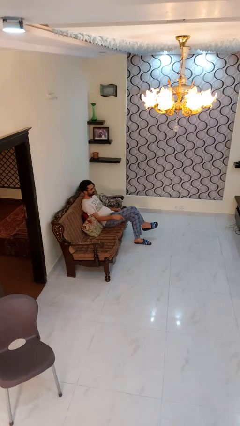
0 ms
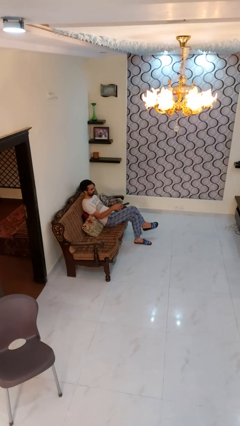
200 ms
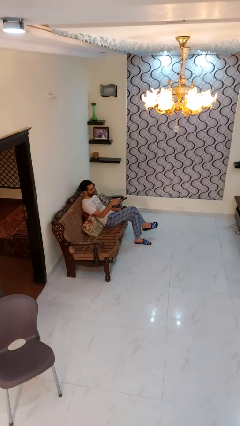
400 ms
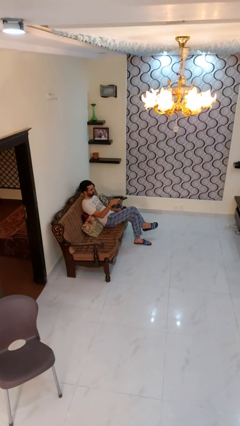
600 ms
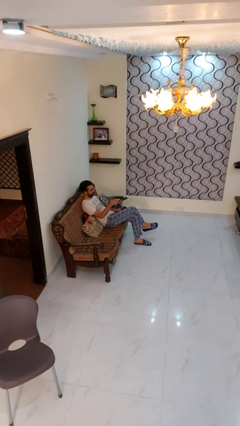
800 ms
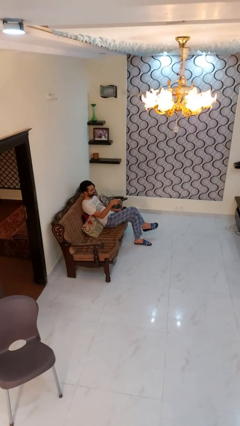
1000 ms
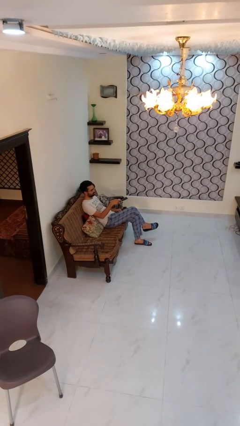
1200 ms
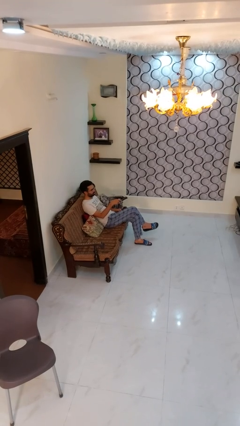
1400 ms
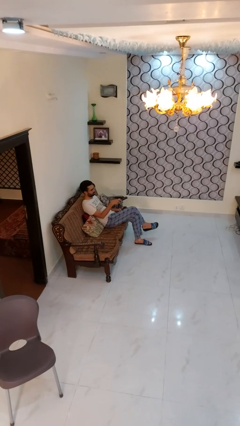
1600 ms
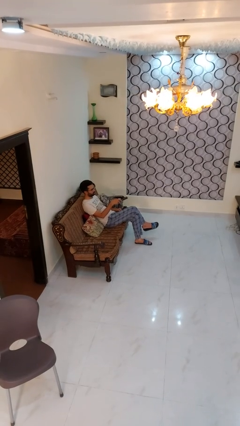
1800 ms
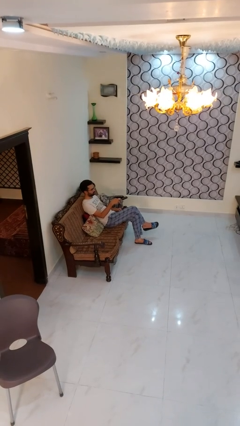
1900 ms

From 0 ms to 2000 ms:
person uses television remote

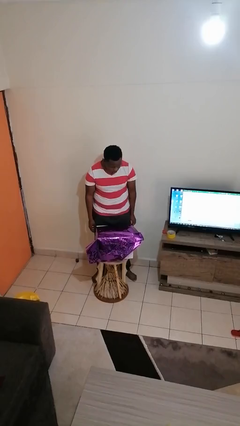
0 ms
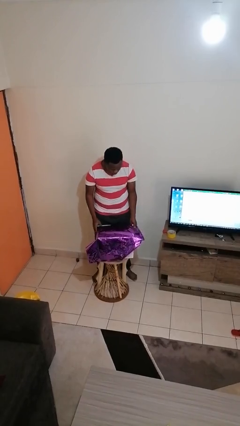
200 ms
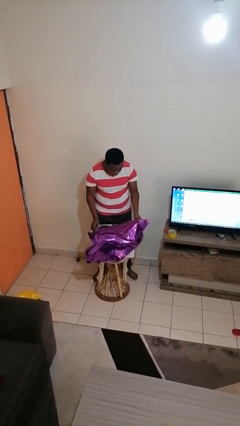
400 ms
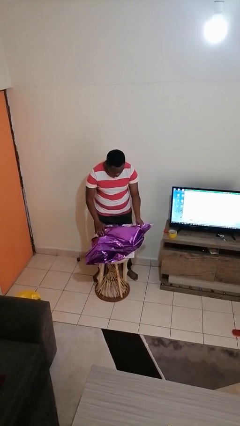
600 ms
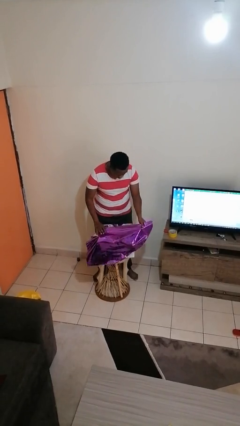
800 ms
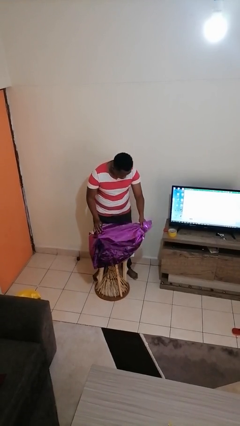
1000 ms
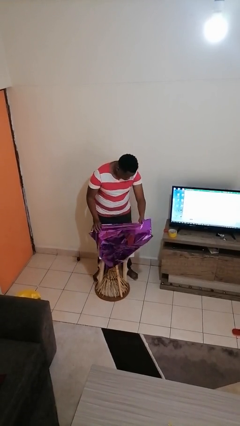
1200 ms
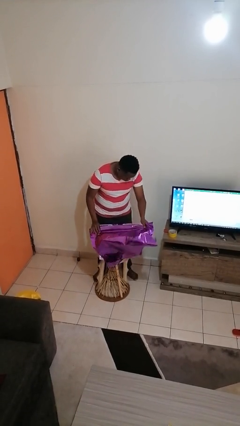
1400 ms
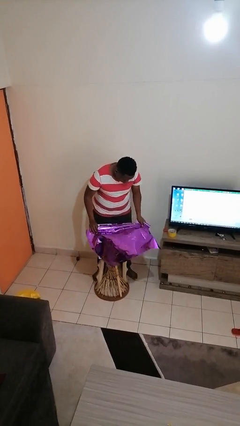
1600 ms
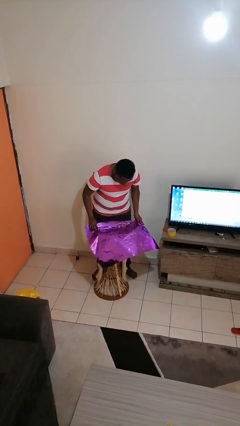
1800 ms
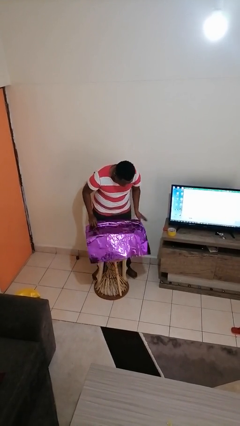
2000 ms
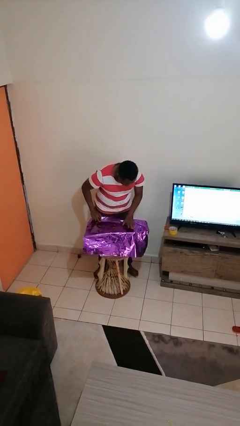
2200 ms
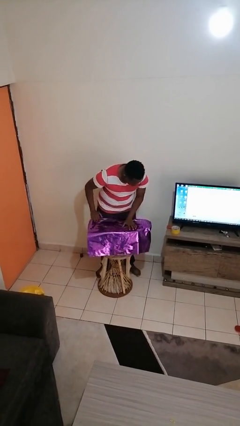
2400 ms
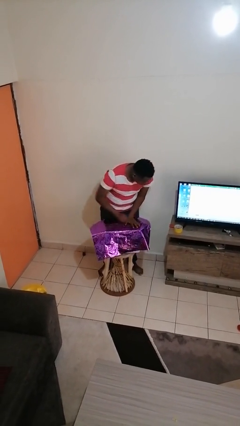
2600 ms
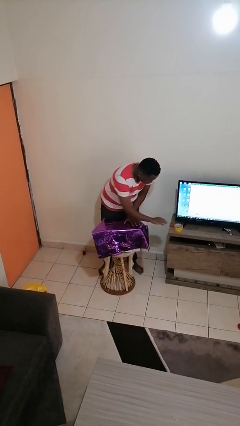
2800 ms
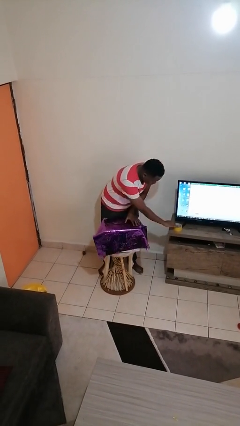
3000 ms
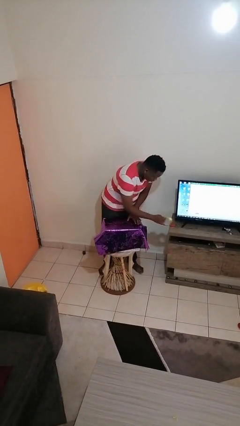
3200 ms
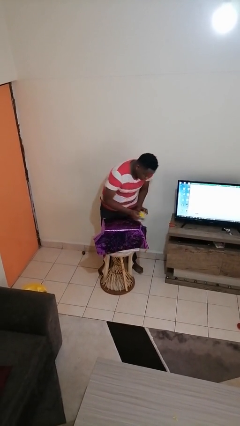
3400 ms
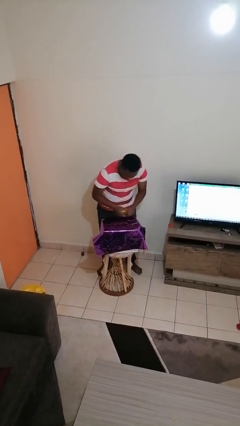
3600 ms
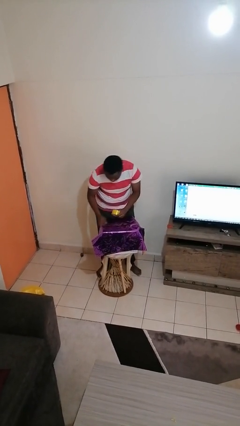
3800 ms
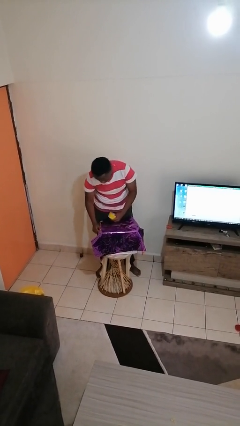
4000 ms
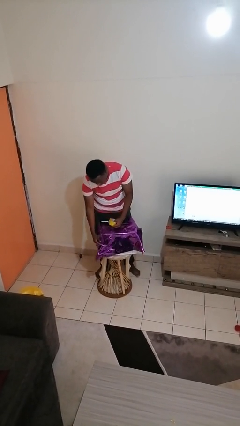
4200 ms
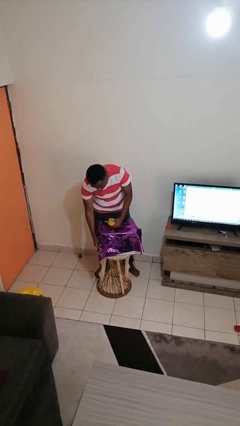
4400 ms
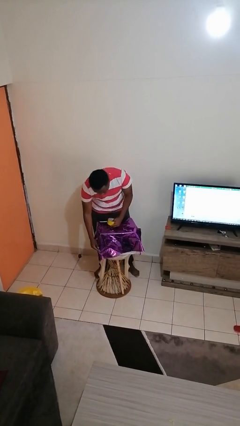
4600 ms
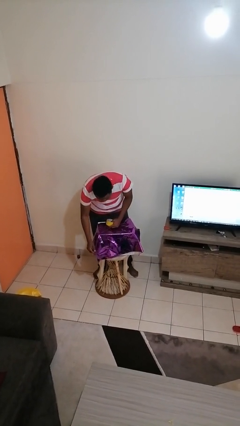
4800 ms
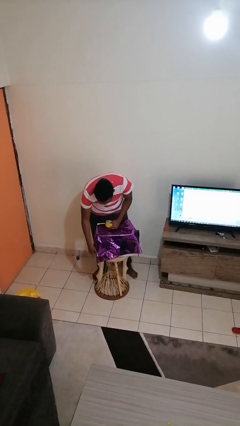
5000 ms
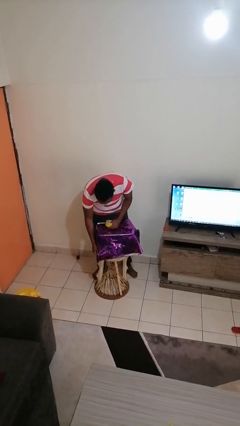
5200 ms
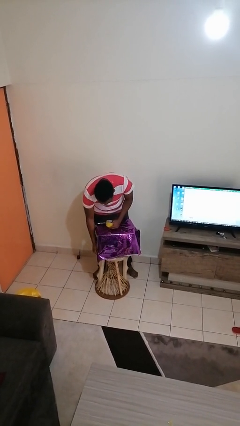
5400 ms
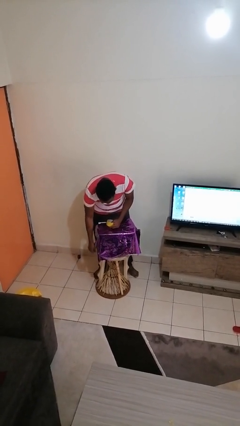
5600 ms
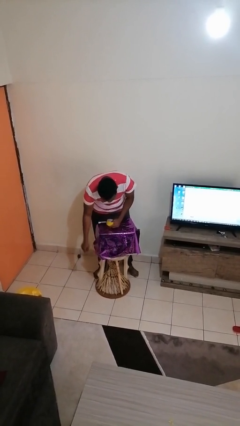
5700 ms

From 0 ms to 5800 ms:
person wraps box

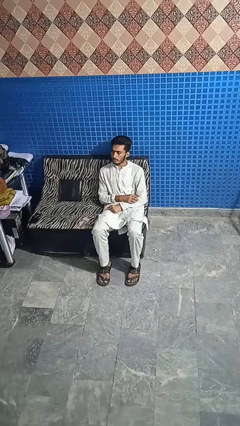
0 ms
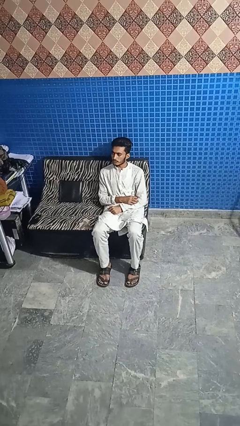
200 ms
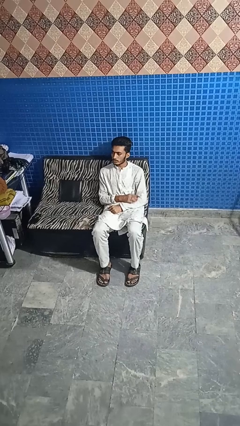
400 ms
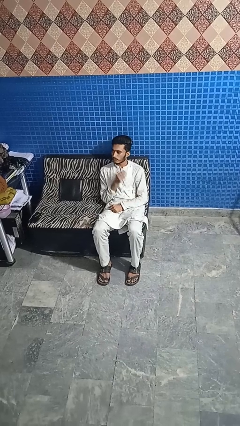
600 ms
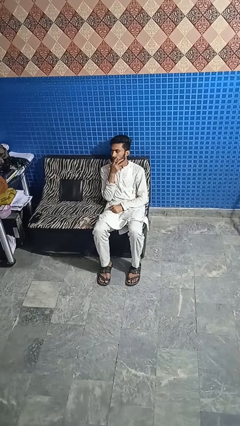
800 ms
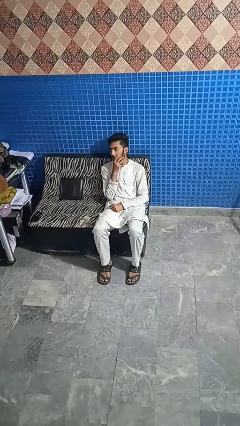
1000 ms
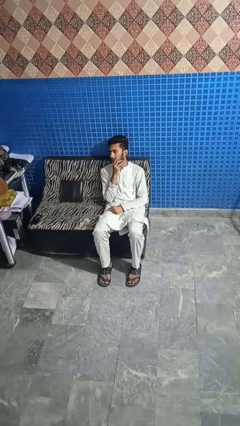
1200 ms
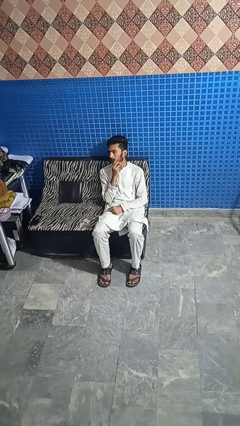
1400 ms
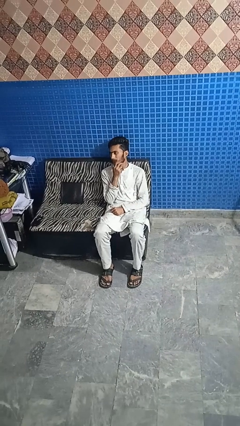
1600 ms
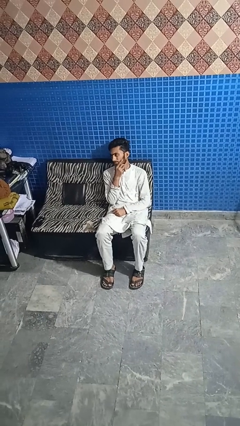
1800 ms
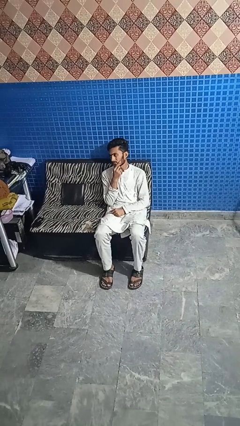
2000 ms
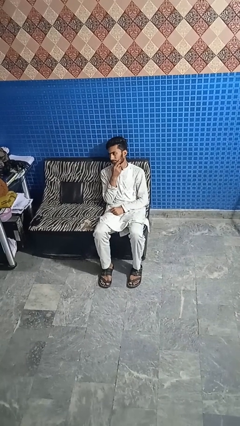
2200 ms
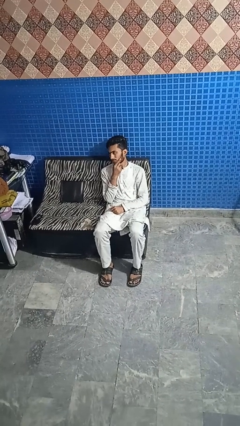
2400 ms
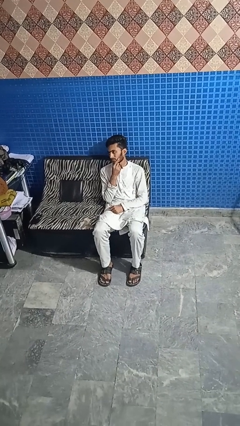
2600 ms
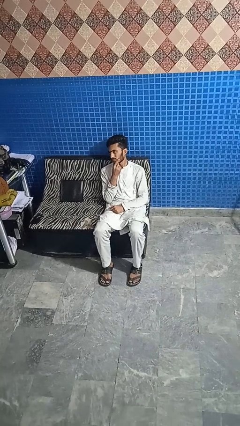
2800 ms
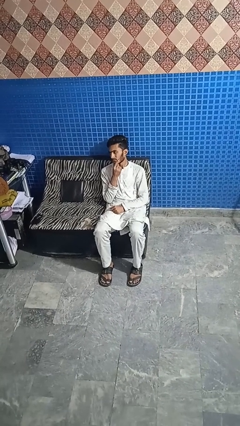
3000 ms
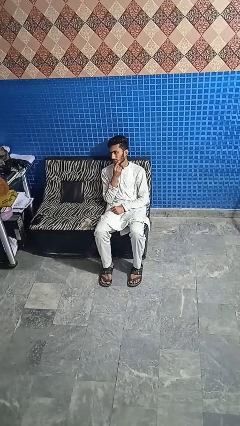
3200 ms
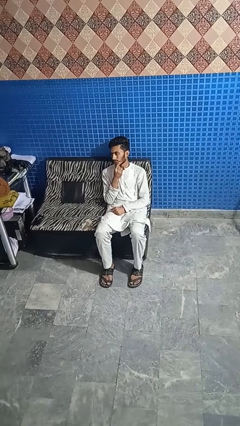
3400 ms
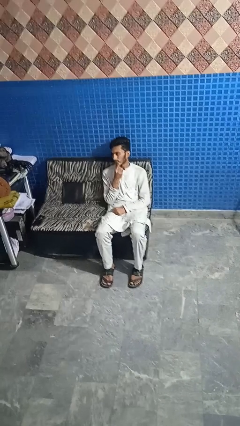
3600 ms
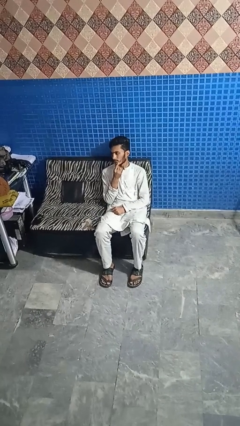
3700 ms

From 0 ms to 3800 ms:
person strokes chin

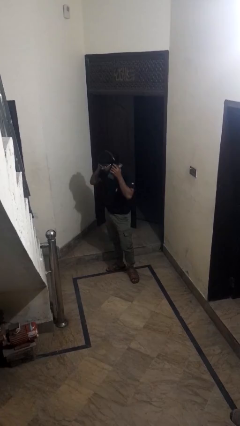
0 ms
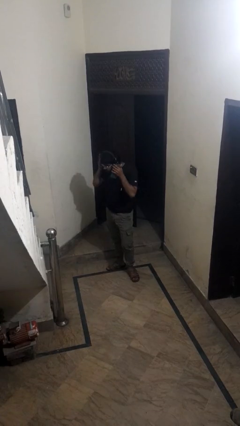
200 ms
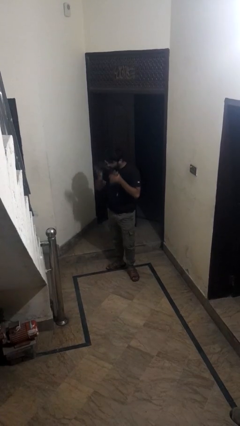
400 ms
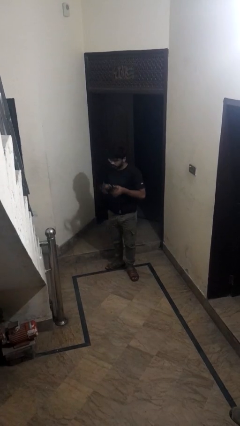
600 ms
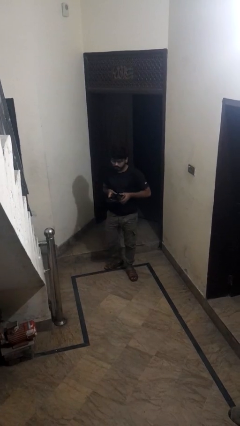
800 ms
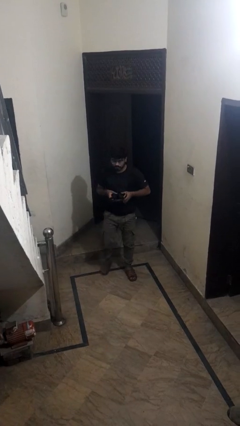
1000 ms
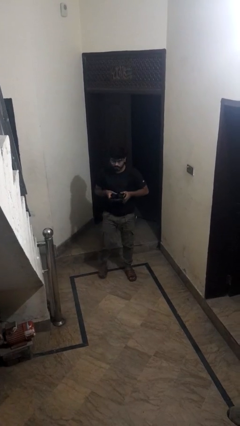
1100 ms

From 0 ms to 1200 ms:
person takes off headphones

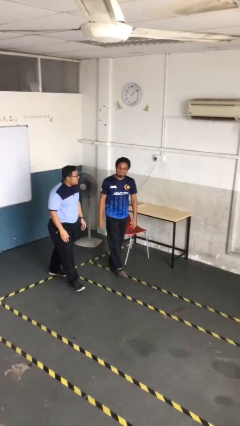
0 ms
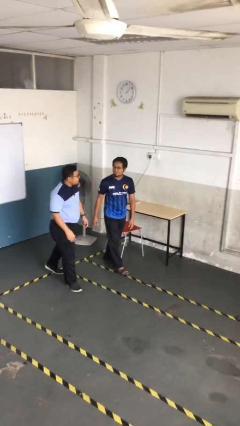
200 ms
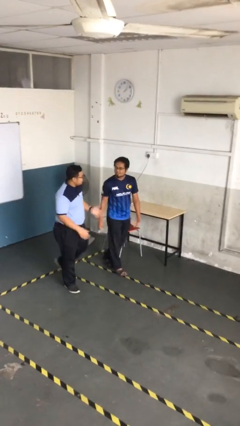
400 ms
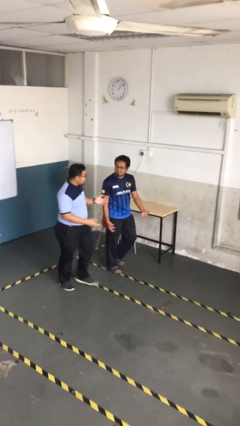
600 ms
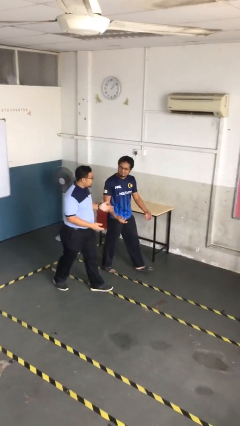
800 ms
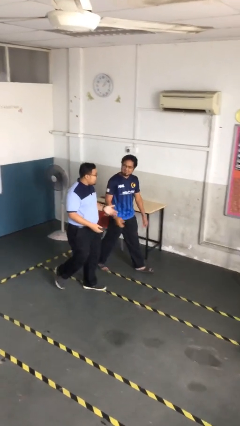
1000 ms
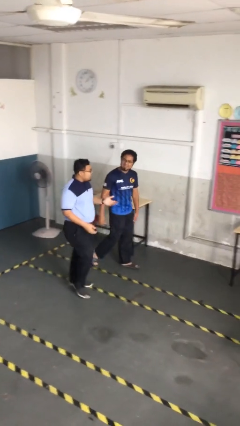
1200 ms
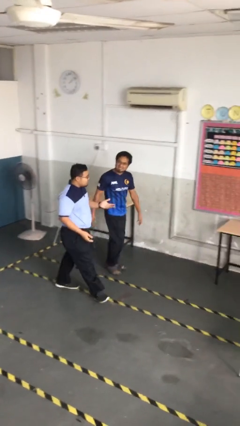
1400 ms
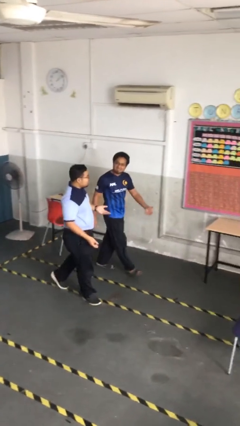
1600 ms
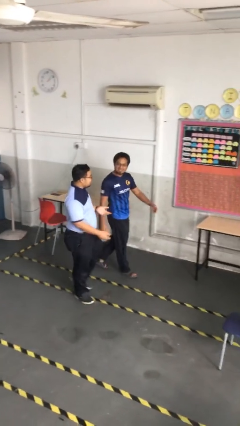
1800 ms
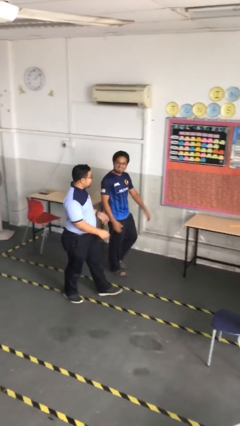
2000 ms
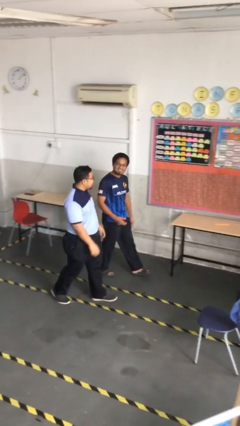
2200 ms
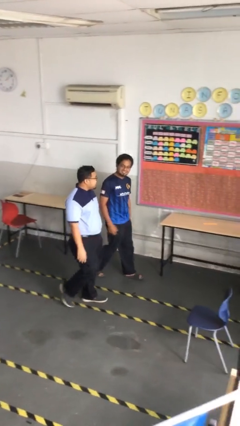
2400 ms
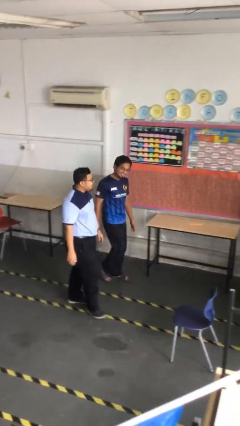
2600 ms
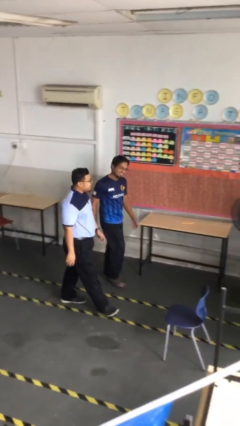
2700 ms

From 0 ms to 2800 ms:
person talks to person

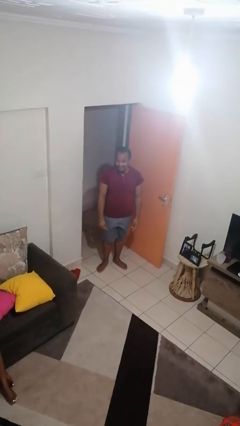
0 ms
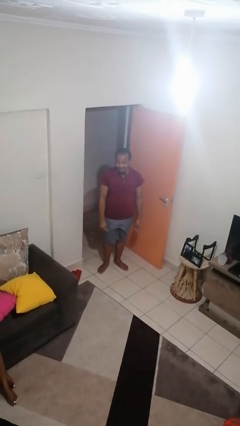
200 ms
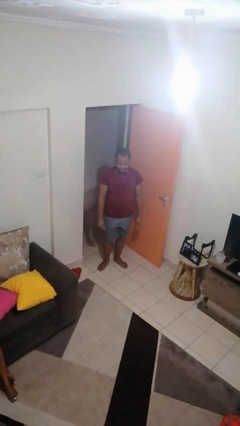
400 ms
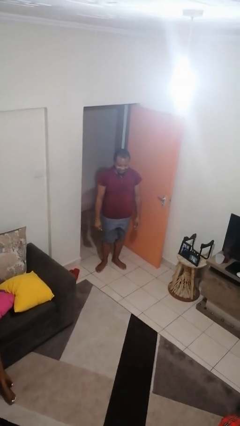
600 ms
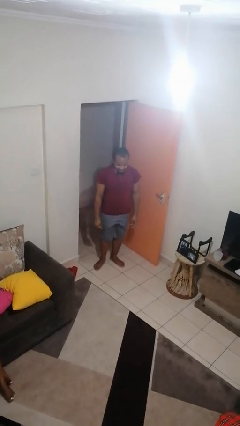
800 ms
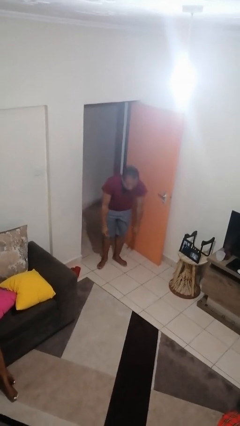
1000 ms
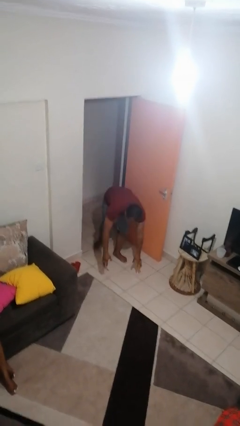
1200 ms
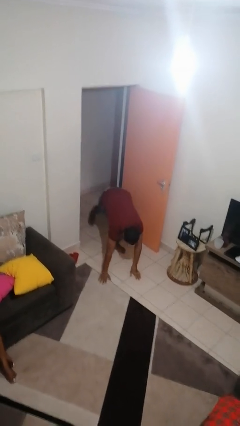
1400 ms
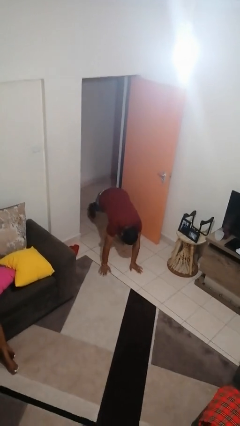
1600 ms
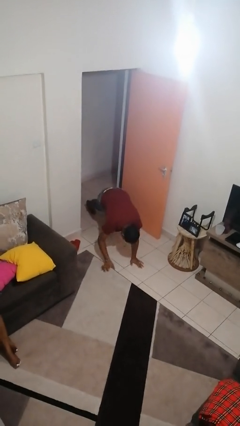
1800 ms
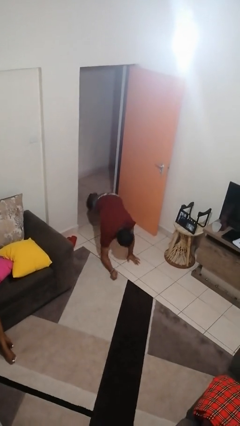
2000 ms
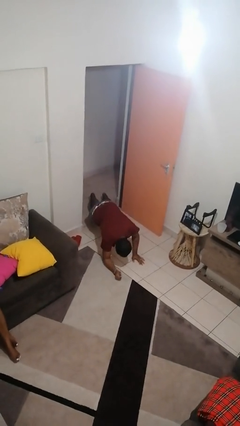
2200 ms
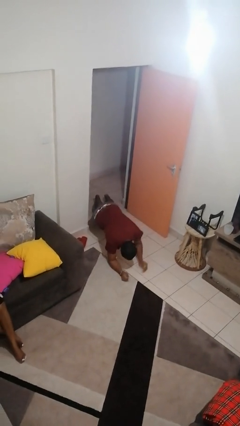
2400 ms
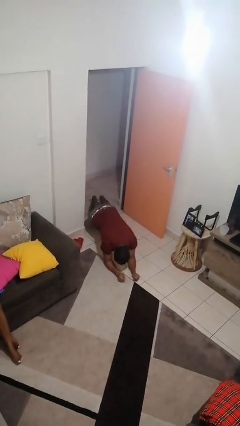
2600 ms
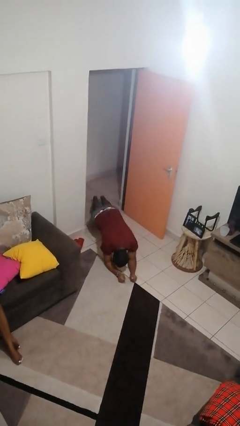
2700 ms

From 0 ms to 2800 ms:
person exercises with plank
